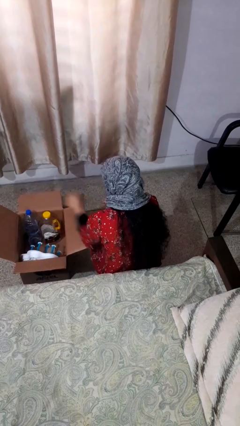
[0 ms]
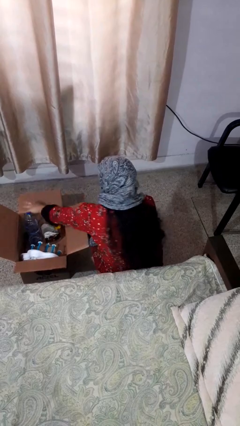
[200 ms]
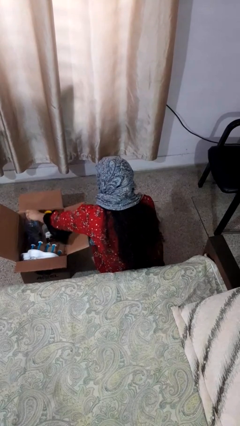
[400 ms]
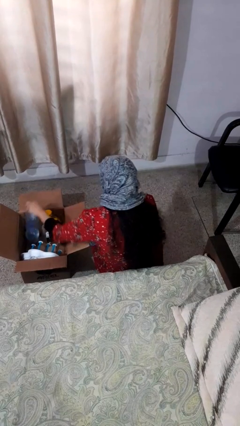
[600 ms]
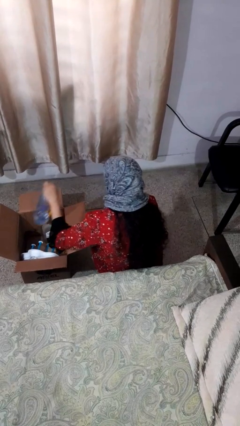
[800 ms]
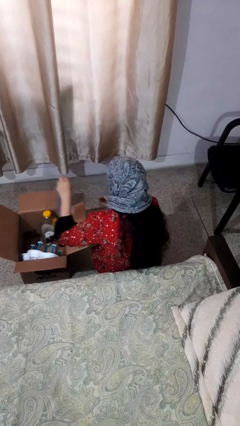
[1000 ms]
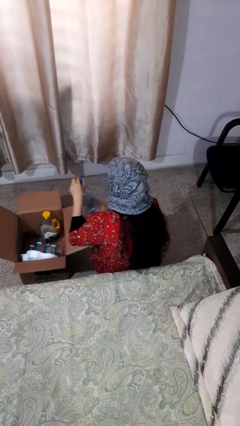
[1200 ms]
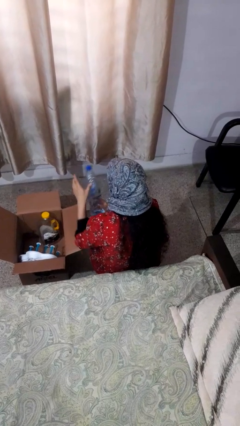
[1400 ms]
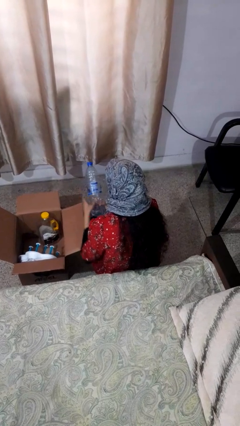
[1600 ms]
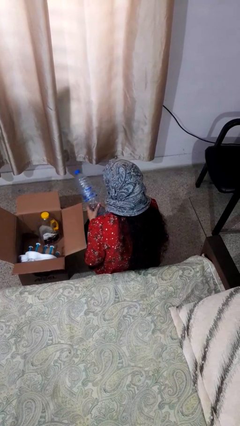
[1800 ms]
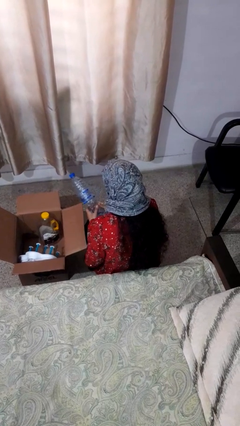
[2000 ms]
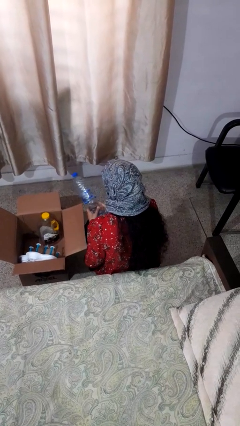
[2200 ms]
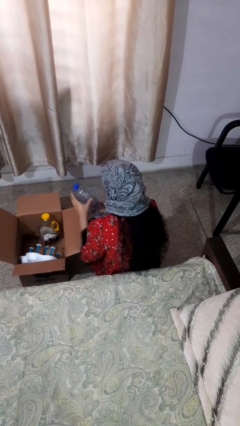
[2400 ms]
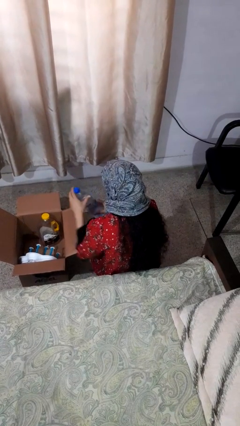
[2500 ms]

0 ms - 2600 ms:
person takes object from box

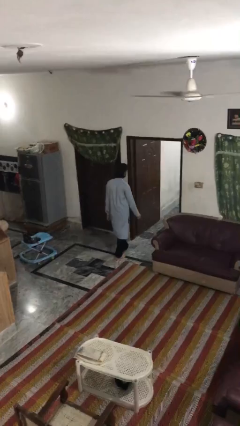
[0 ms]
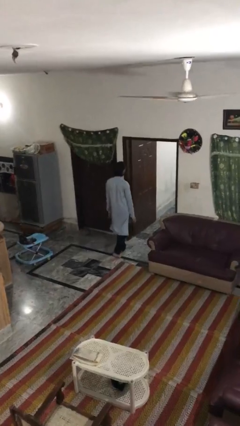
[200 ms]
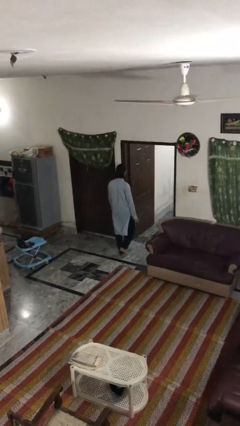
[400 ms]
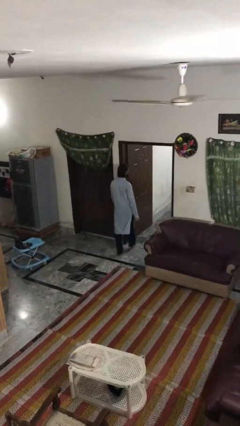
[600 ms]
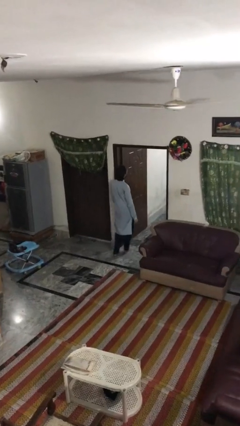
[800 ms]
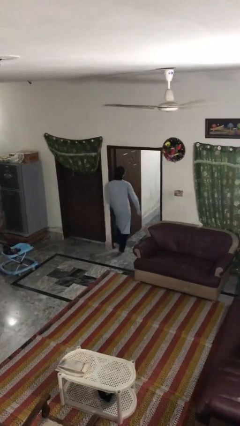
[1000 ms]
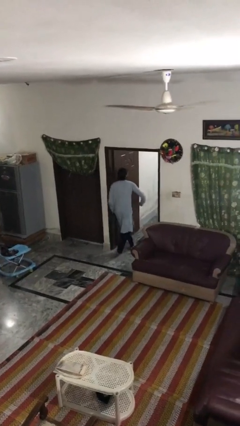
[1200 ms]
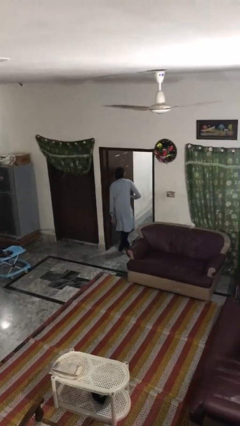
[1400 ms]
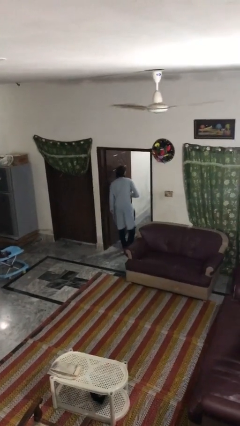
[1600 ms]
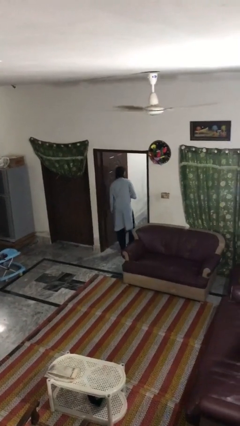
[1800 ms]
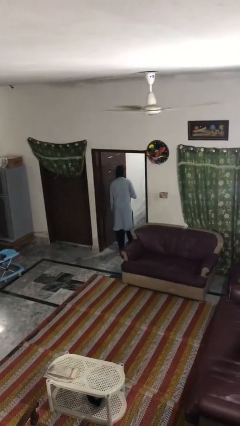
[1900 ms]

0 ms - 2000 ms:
person bumps into wall

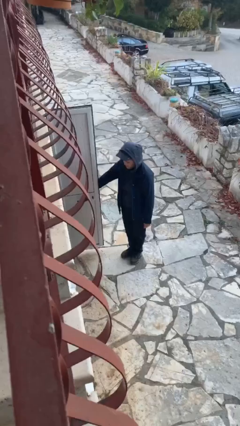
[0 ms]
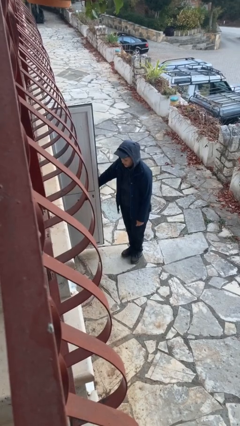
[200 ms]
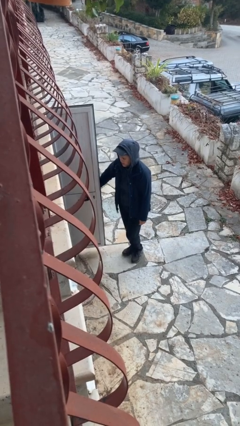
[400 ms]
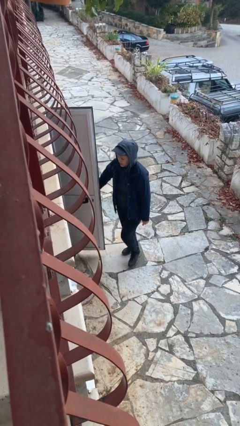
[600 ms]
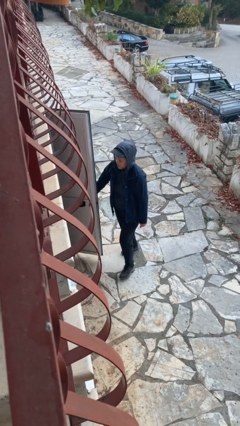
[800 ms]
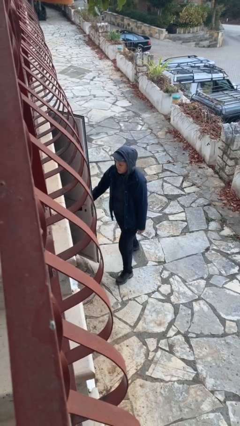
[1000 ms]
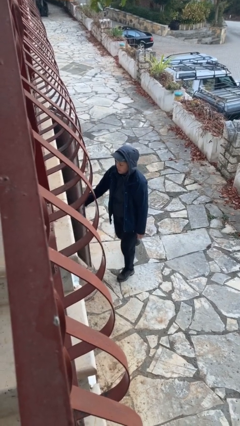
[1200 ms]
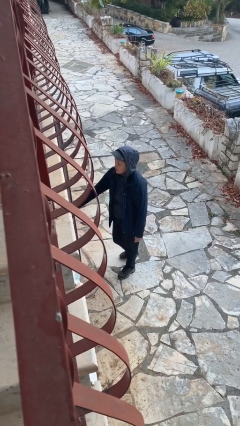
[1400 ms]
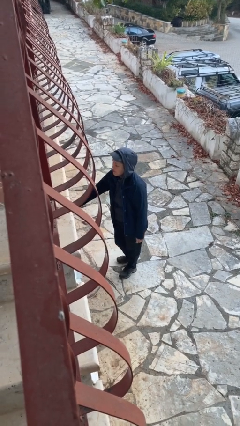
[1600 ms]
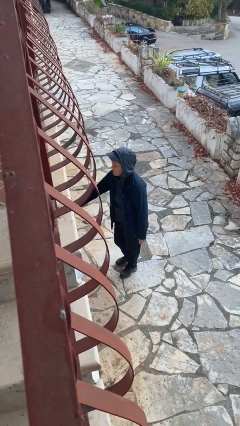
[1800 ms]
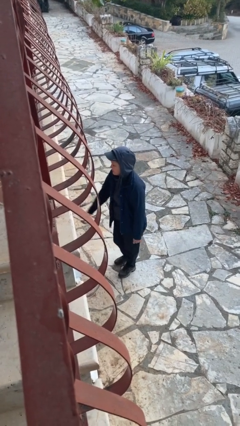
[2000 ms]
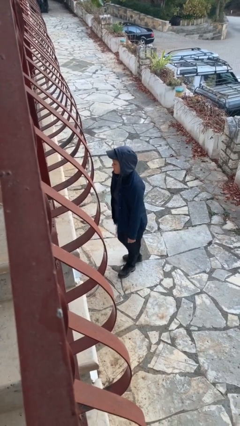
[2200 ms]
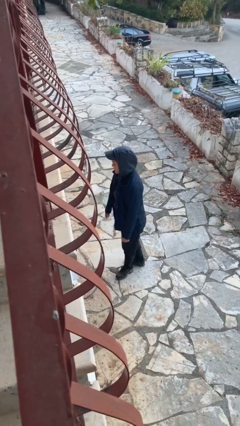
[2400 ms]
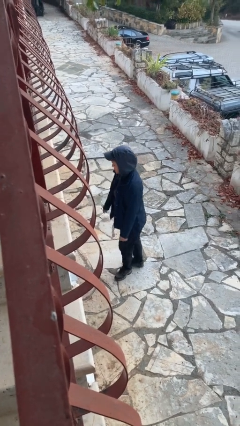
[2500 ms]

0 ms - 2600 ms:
person opens facility door

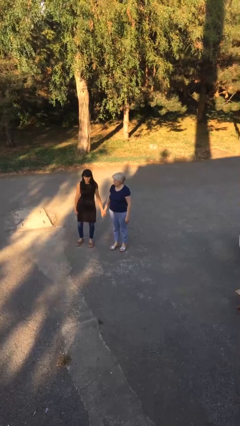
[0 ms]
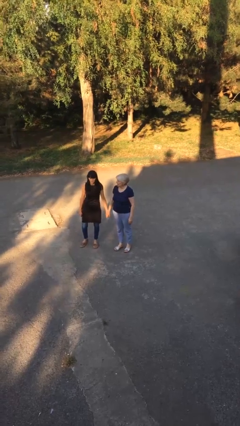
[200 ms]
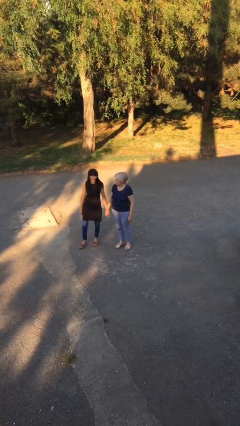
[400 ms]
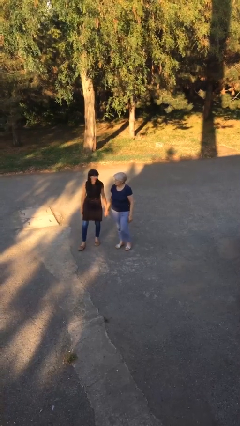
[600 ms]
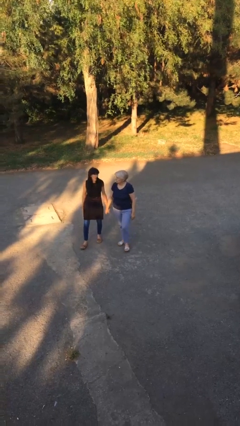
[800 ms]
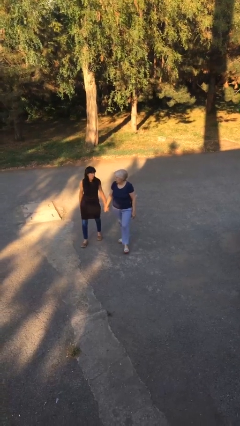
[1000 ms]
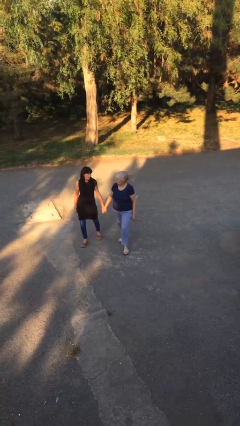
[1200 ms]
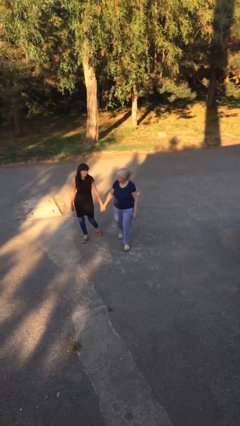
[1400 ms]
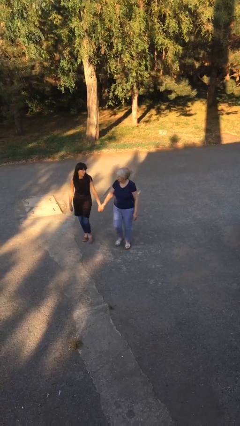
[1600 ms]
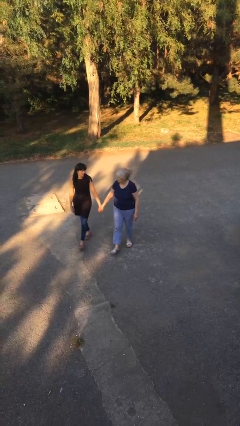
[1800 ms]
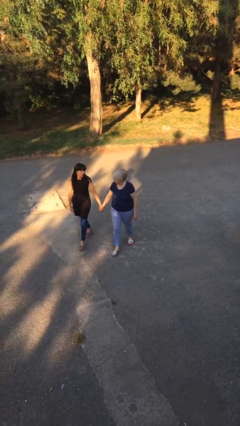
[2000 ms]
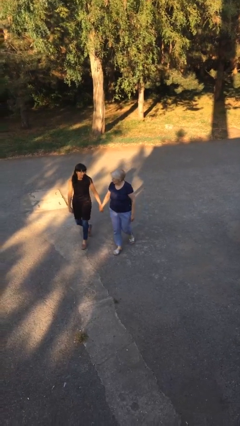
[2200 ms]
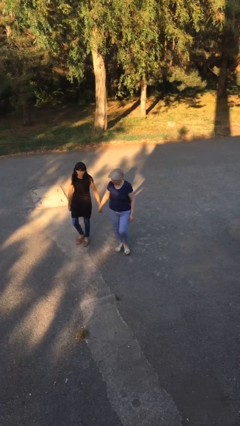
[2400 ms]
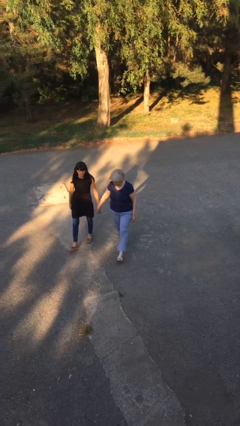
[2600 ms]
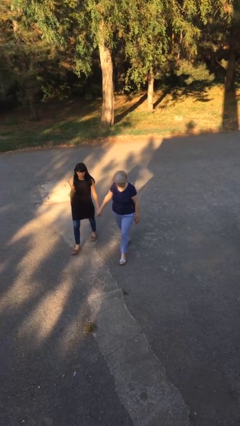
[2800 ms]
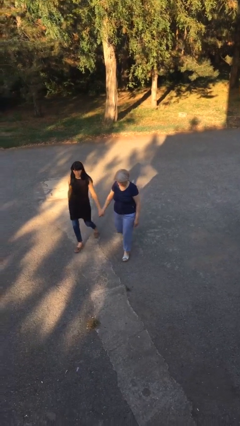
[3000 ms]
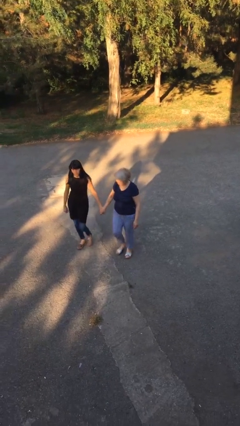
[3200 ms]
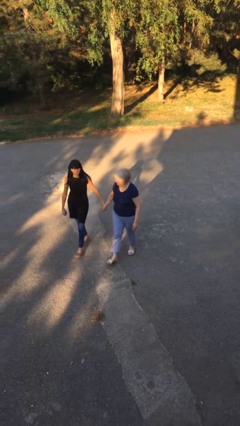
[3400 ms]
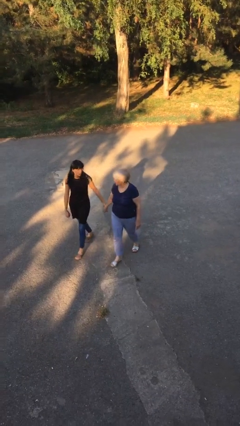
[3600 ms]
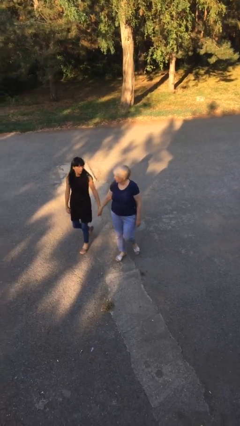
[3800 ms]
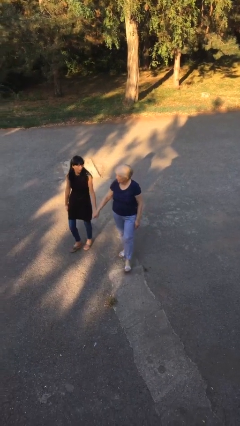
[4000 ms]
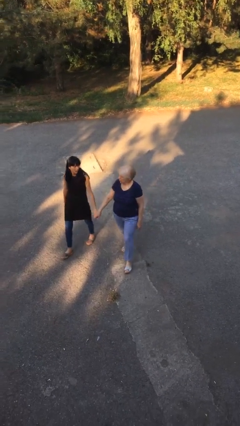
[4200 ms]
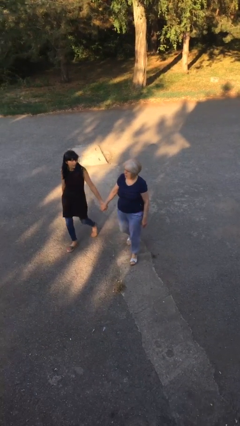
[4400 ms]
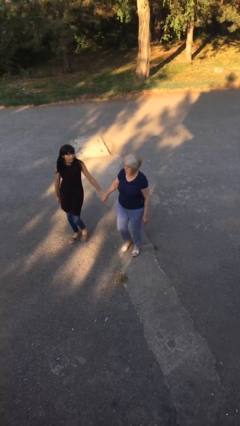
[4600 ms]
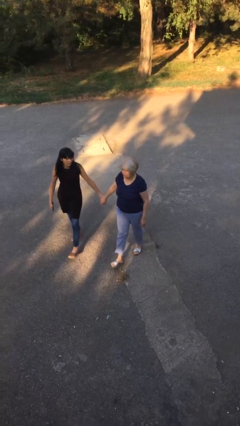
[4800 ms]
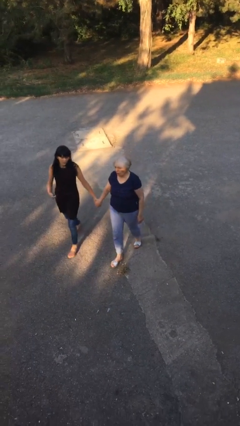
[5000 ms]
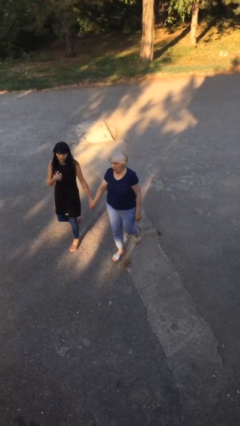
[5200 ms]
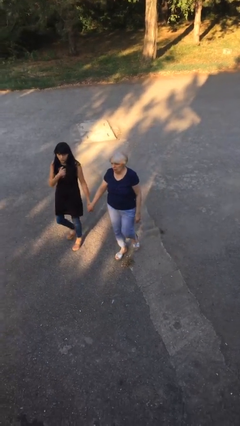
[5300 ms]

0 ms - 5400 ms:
person holds hand

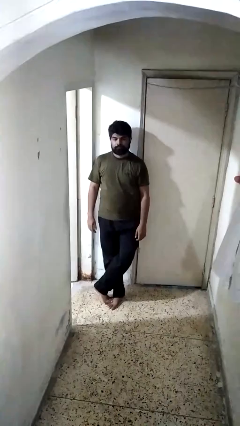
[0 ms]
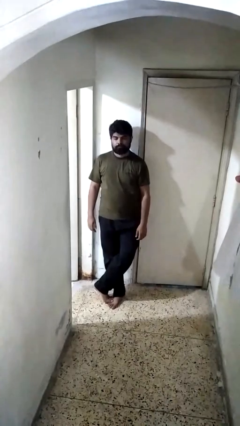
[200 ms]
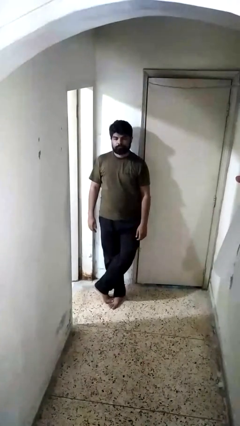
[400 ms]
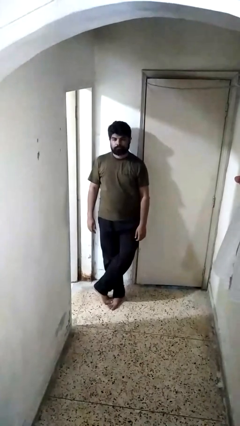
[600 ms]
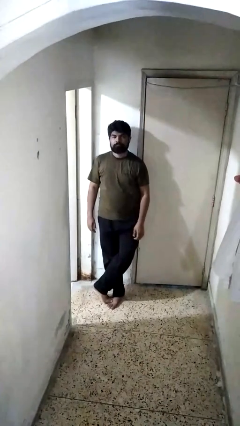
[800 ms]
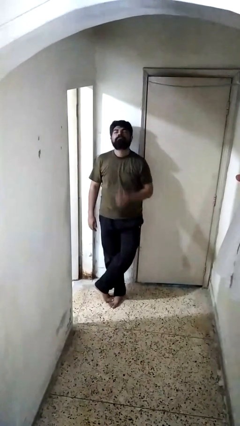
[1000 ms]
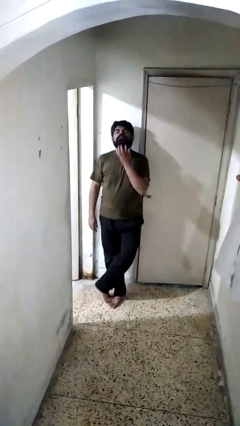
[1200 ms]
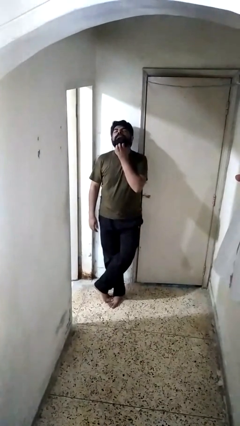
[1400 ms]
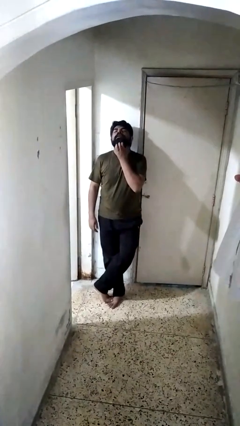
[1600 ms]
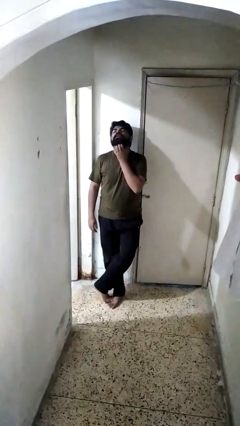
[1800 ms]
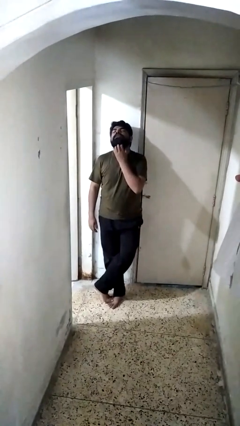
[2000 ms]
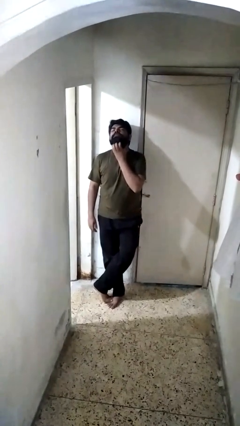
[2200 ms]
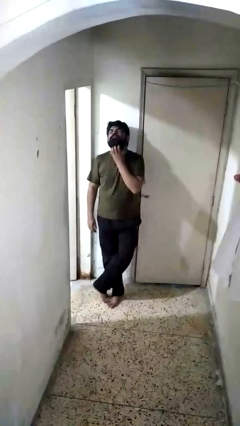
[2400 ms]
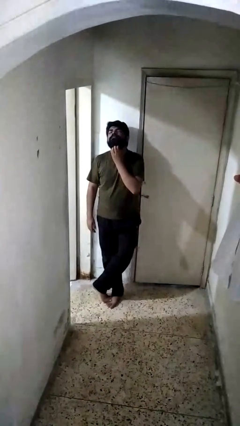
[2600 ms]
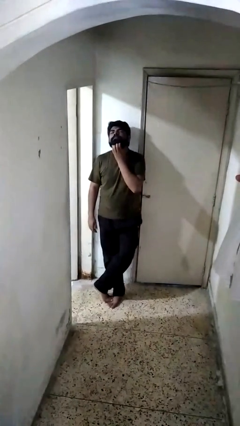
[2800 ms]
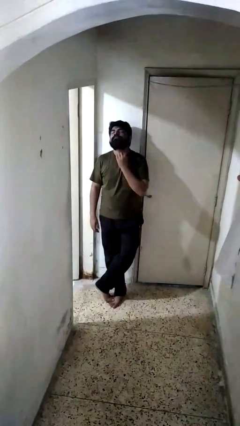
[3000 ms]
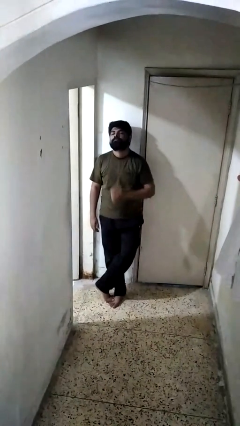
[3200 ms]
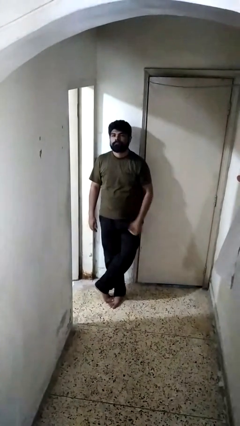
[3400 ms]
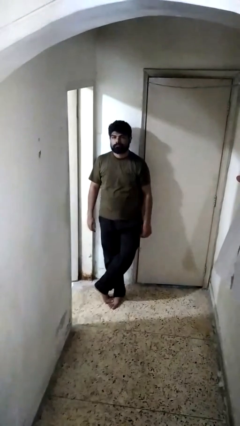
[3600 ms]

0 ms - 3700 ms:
person rubs neck

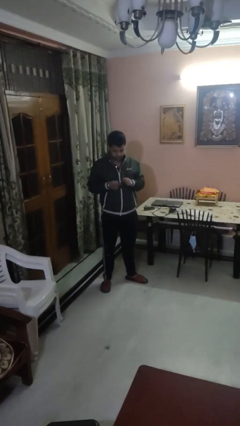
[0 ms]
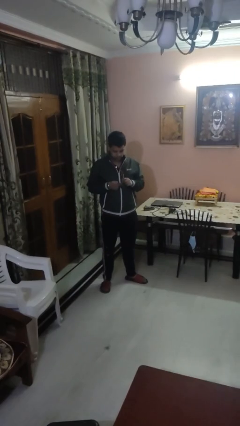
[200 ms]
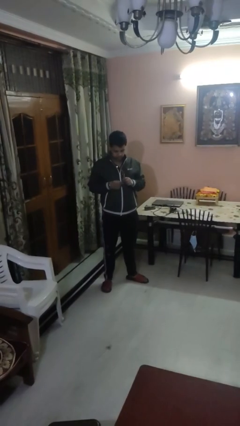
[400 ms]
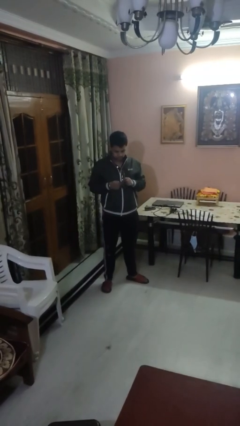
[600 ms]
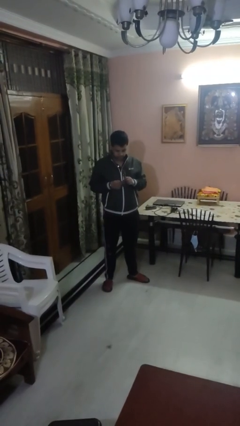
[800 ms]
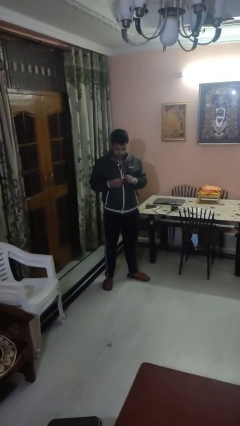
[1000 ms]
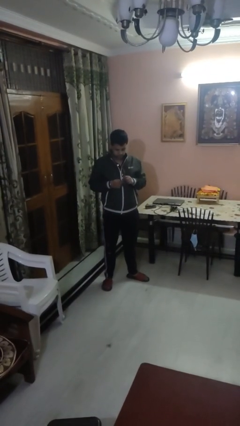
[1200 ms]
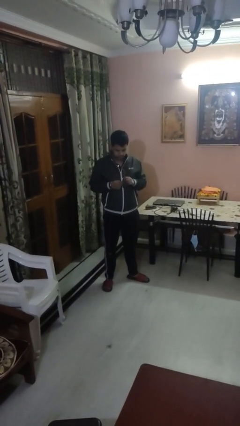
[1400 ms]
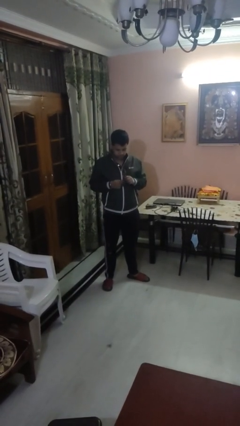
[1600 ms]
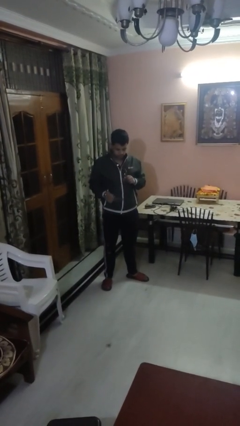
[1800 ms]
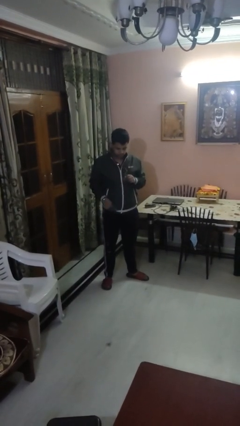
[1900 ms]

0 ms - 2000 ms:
person cleans eyeglasses
